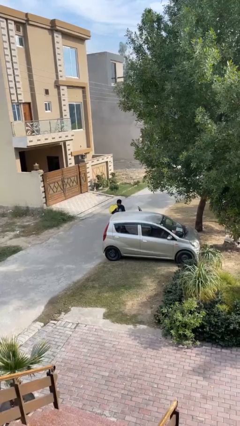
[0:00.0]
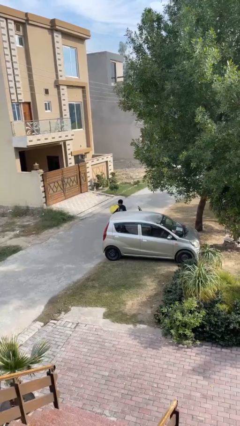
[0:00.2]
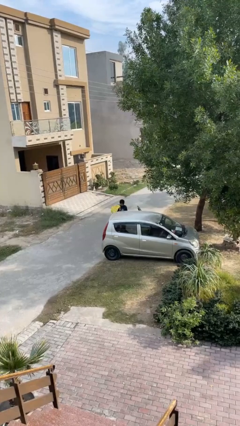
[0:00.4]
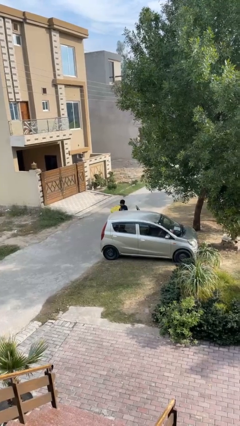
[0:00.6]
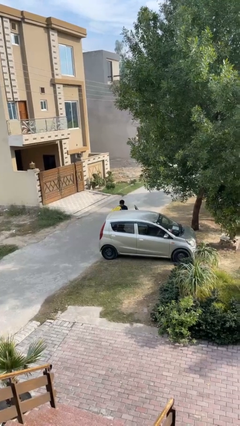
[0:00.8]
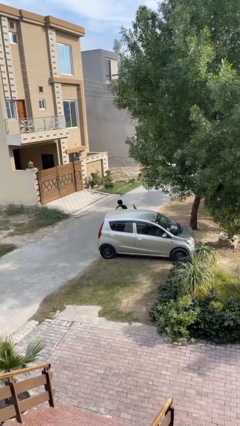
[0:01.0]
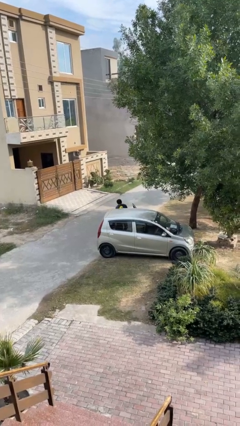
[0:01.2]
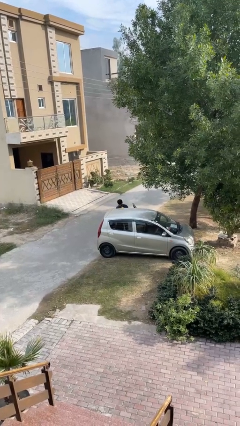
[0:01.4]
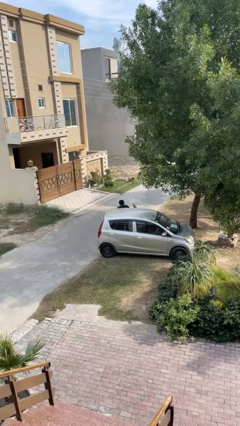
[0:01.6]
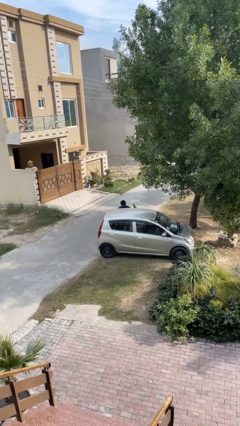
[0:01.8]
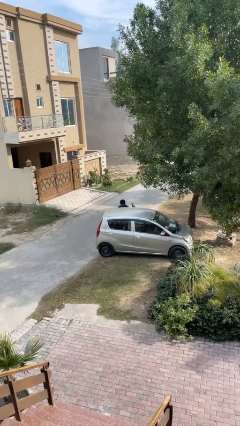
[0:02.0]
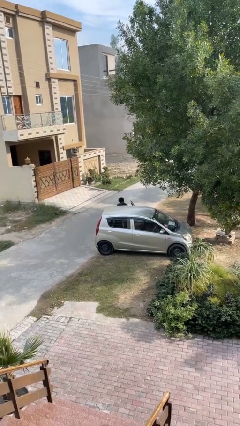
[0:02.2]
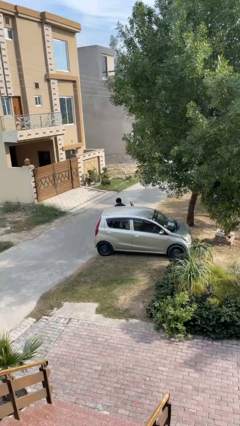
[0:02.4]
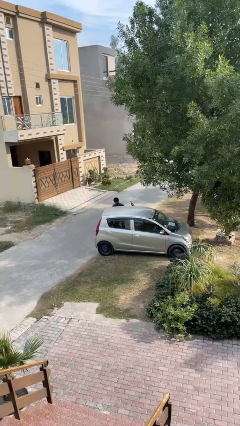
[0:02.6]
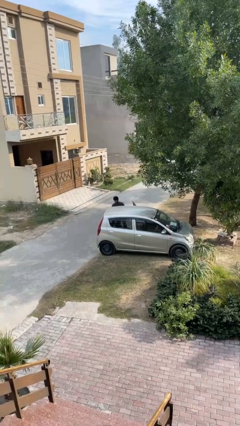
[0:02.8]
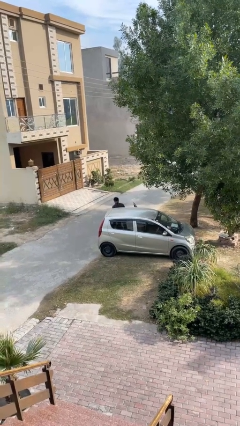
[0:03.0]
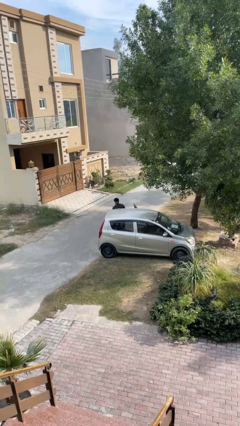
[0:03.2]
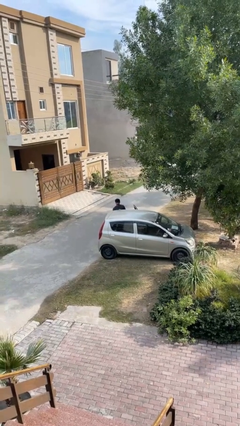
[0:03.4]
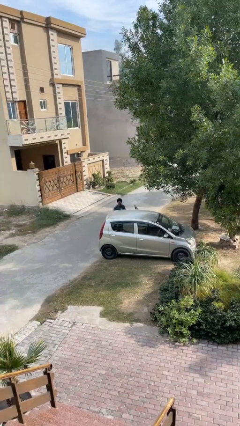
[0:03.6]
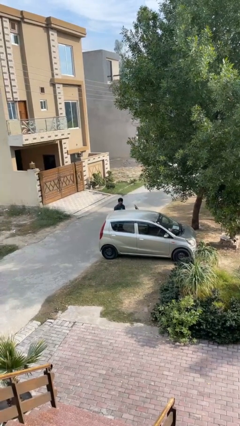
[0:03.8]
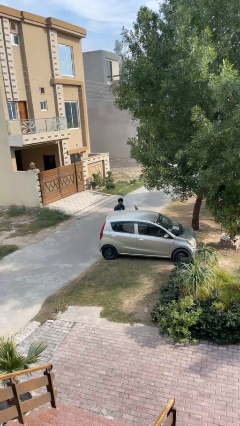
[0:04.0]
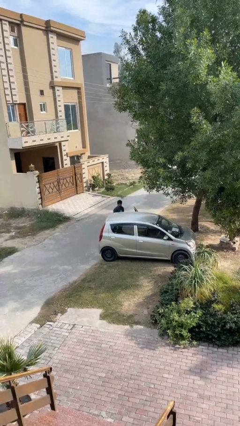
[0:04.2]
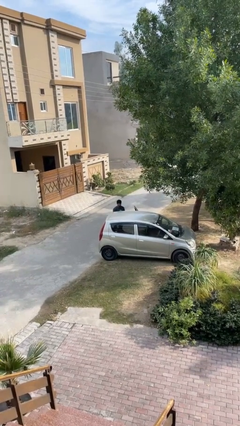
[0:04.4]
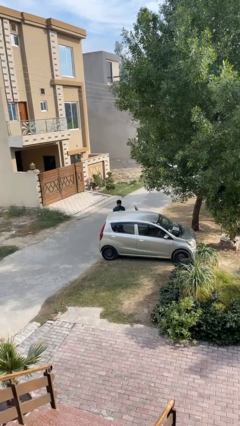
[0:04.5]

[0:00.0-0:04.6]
person loads car

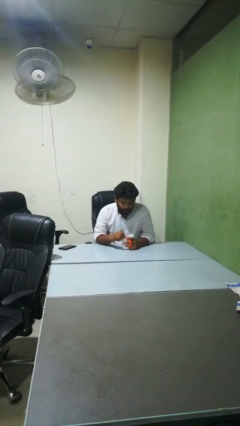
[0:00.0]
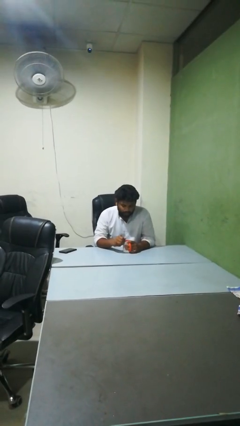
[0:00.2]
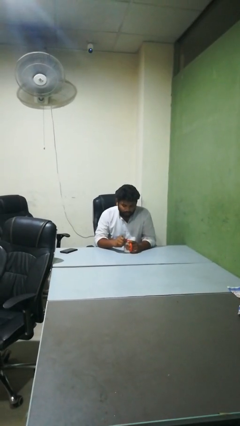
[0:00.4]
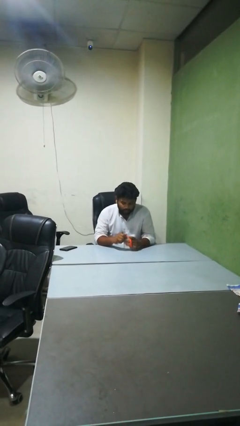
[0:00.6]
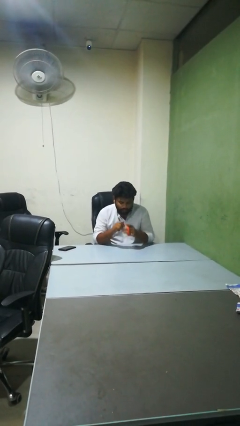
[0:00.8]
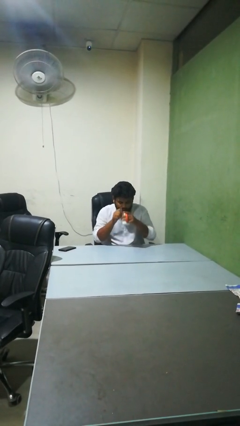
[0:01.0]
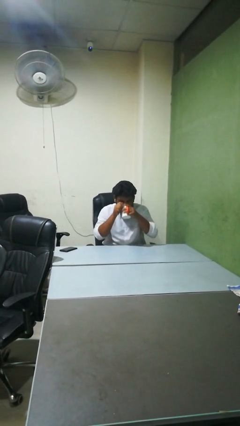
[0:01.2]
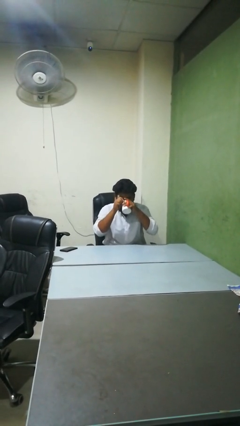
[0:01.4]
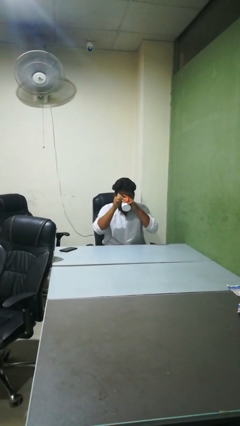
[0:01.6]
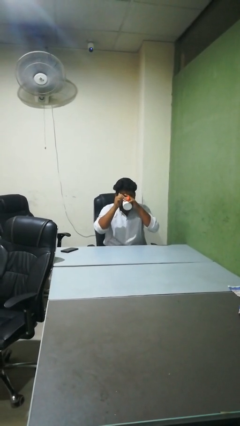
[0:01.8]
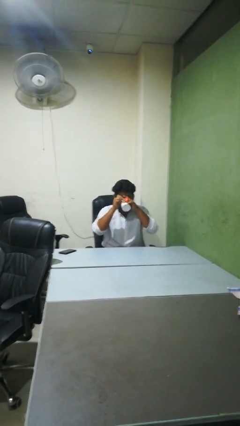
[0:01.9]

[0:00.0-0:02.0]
person drinks from mug

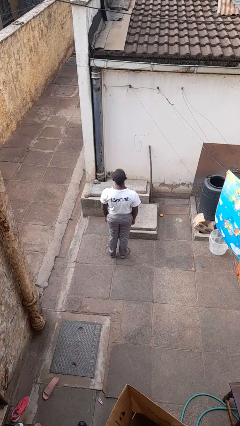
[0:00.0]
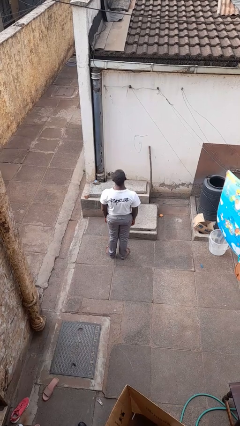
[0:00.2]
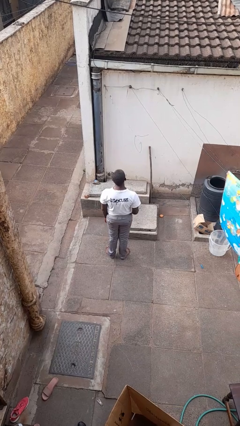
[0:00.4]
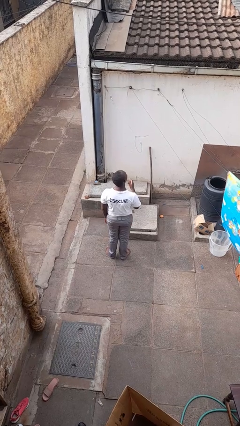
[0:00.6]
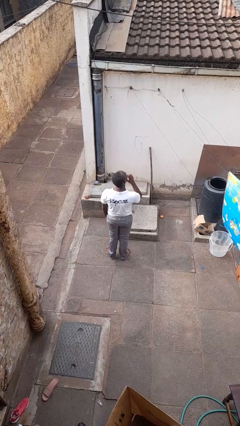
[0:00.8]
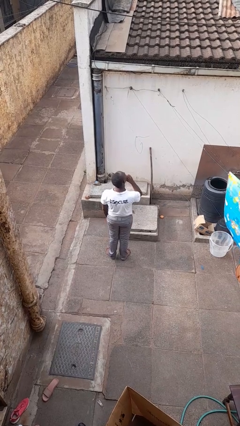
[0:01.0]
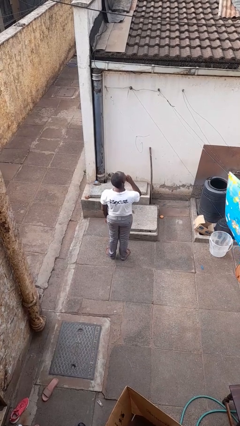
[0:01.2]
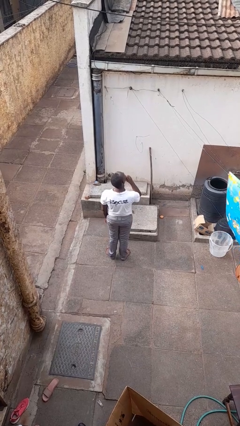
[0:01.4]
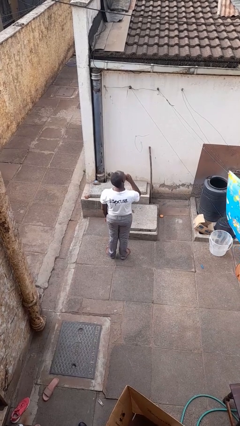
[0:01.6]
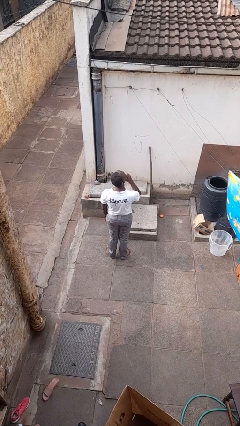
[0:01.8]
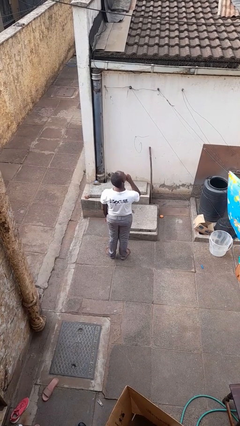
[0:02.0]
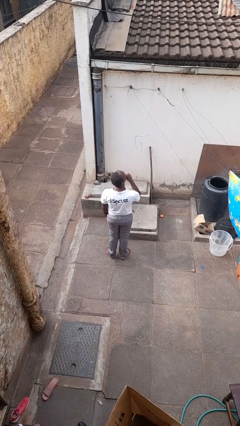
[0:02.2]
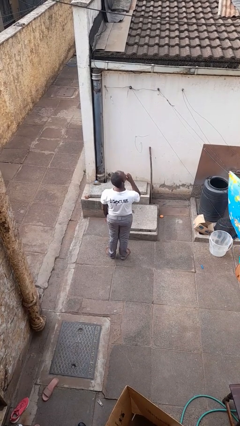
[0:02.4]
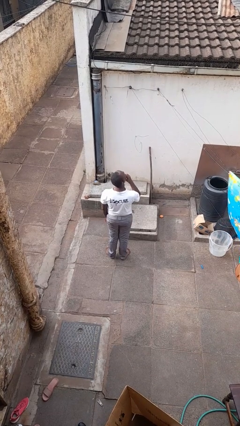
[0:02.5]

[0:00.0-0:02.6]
person strokes chin

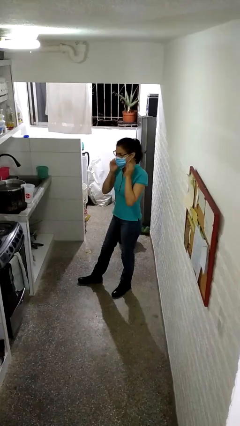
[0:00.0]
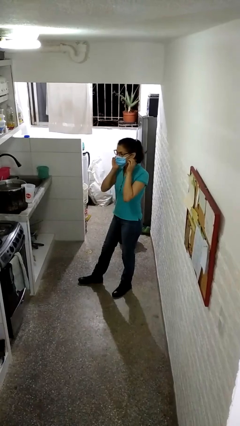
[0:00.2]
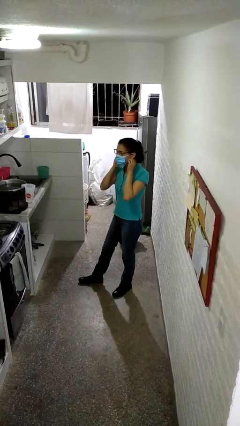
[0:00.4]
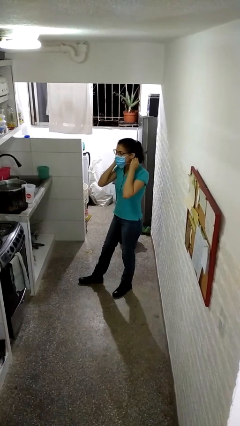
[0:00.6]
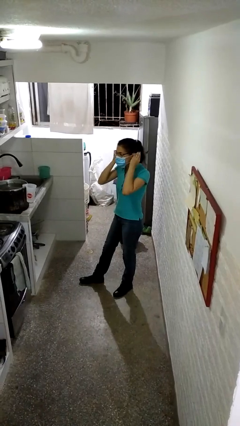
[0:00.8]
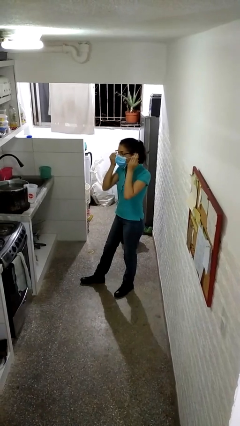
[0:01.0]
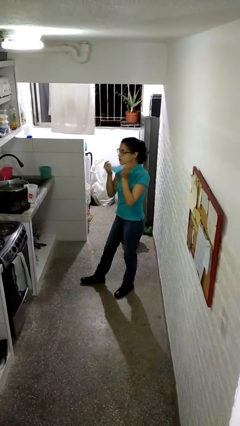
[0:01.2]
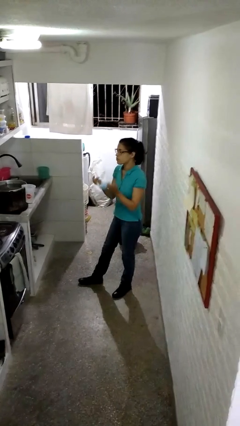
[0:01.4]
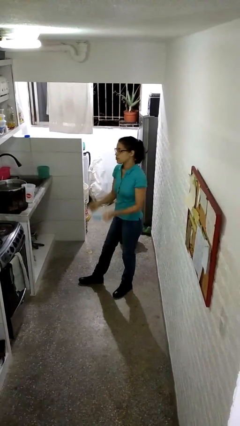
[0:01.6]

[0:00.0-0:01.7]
person takes off facemask

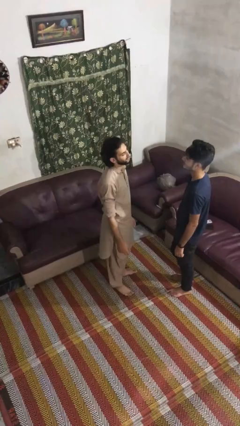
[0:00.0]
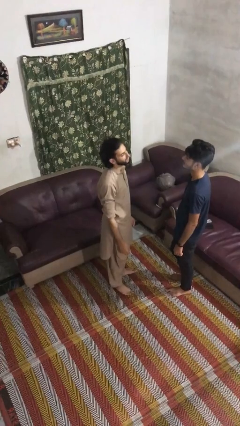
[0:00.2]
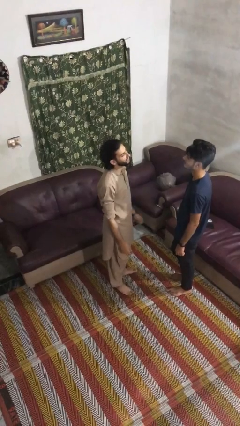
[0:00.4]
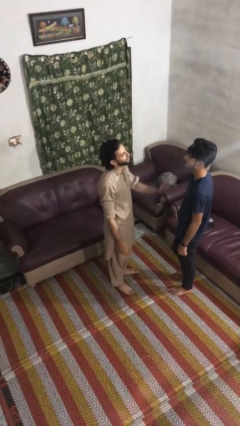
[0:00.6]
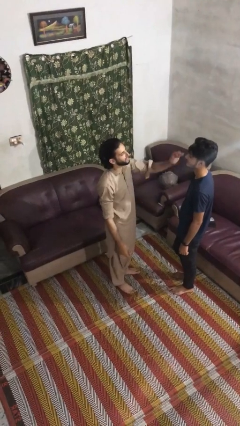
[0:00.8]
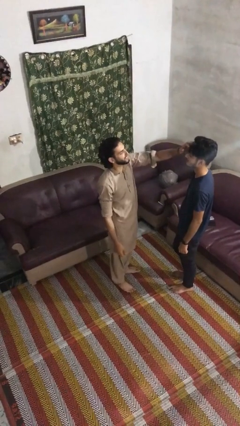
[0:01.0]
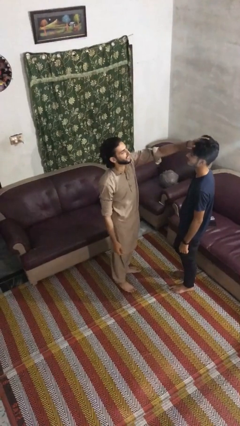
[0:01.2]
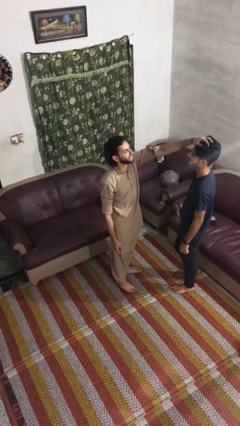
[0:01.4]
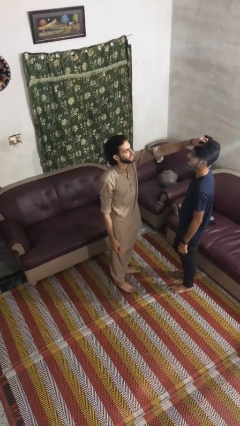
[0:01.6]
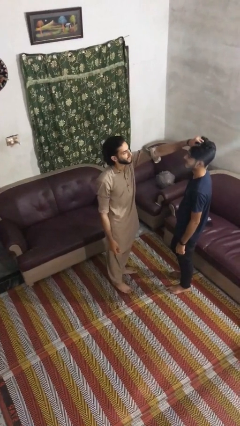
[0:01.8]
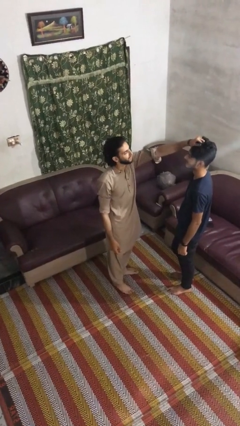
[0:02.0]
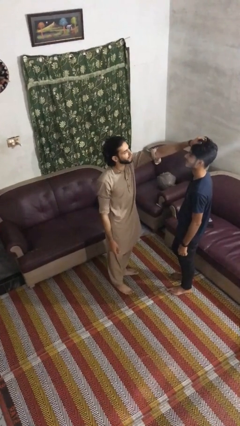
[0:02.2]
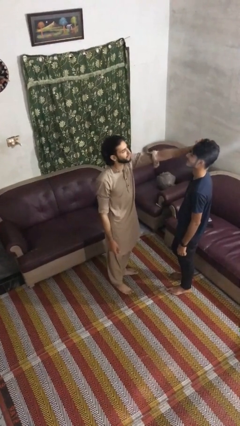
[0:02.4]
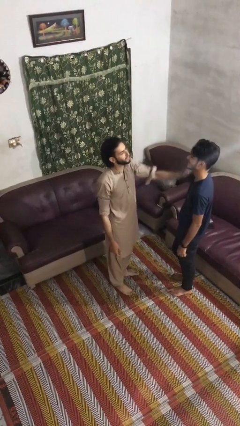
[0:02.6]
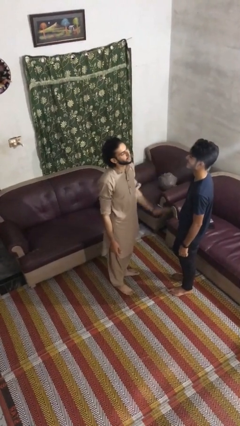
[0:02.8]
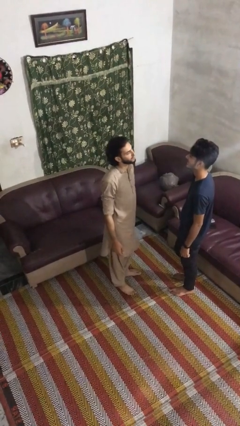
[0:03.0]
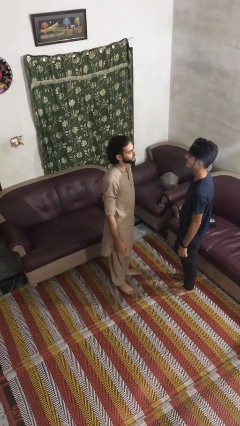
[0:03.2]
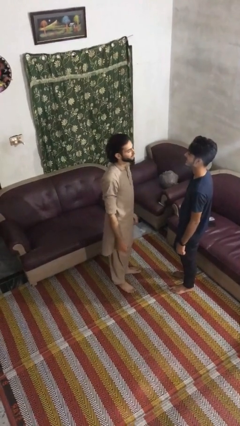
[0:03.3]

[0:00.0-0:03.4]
person grabs person by hair

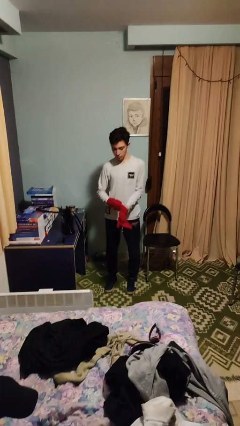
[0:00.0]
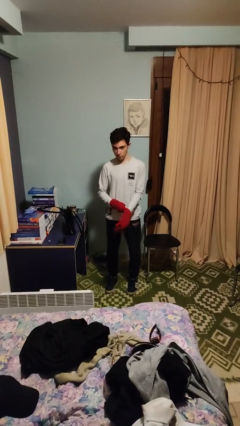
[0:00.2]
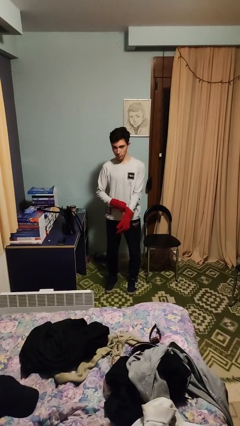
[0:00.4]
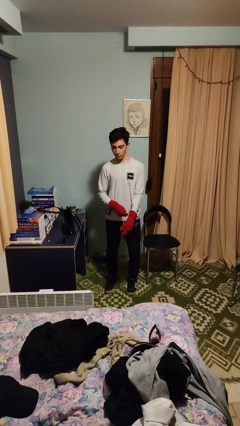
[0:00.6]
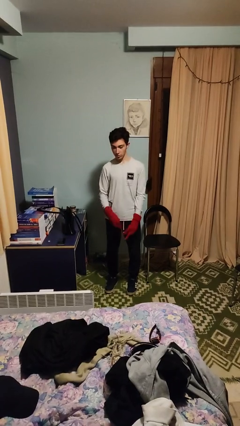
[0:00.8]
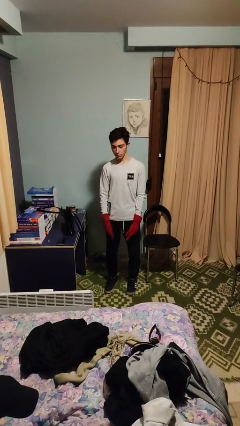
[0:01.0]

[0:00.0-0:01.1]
person puts on gloves

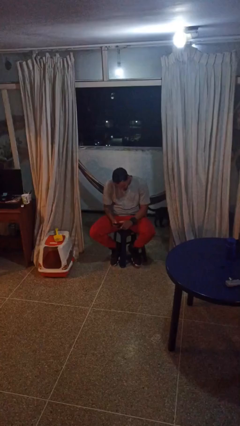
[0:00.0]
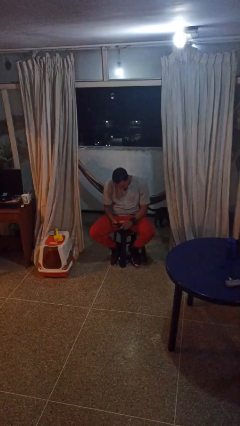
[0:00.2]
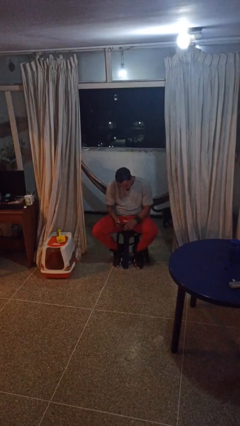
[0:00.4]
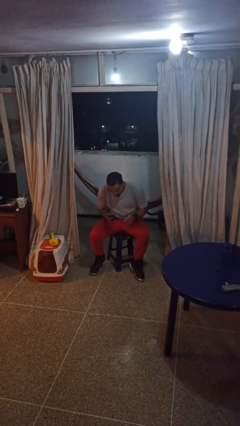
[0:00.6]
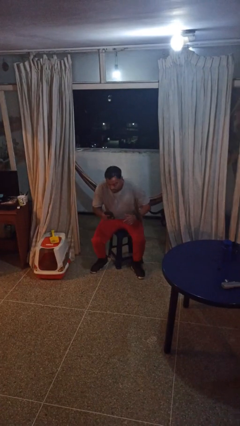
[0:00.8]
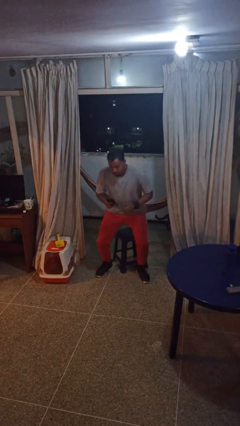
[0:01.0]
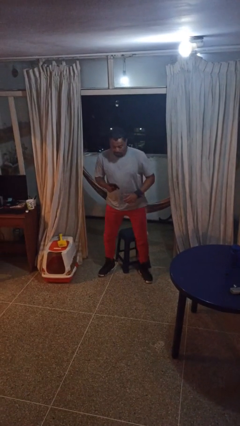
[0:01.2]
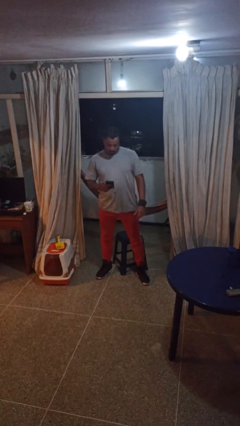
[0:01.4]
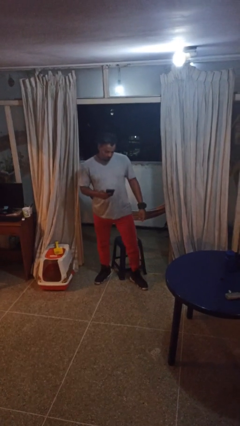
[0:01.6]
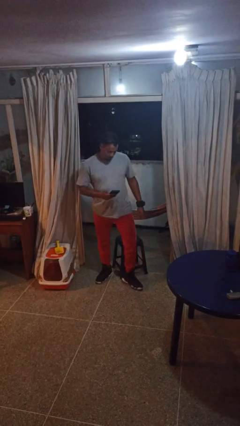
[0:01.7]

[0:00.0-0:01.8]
person stands up

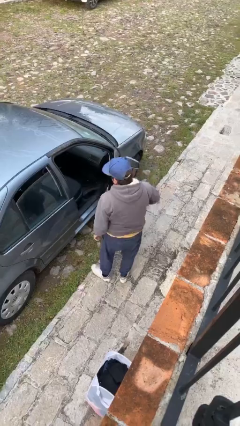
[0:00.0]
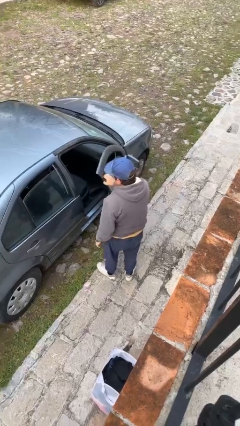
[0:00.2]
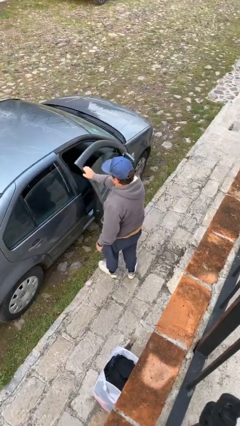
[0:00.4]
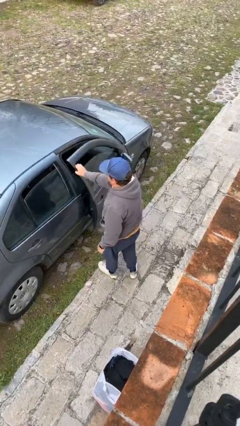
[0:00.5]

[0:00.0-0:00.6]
person closes car door
